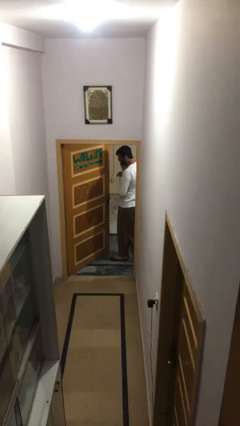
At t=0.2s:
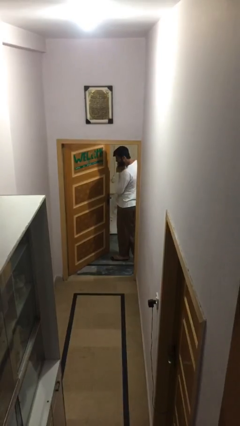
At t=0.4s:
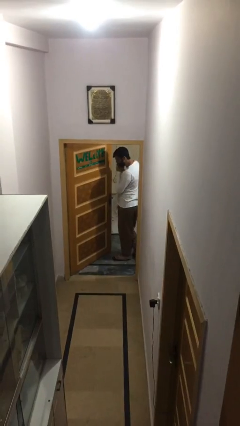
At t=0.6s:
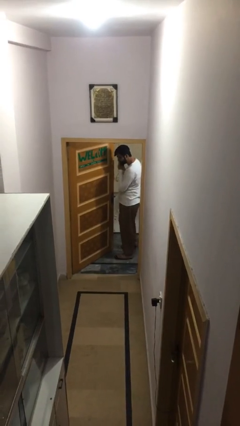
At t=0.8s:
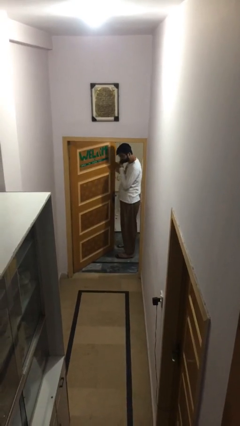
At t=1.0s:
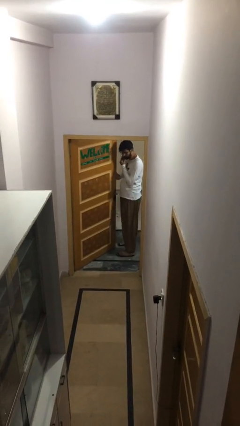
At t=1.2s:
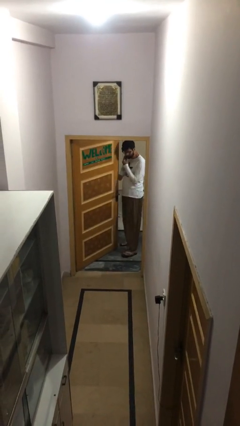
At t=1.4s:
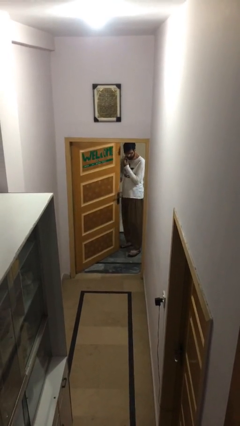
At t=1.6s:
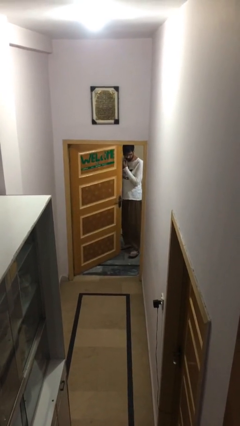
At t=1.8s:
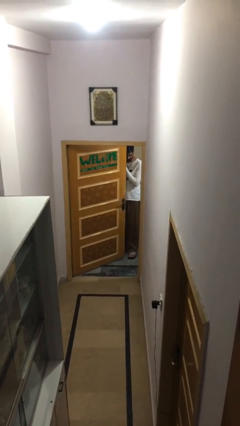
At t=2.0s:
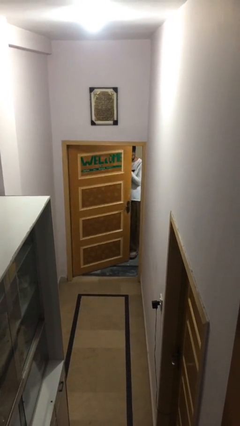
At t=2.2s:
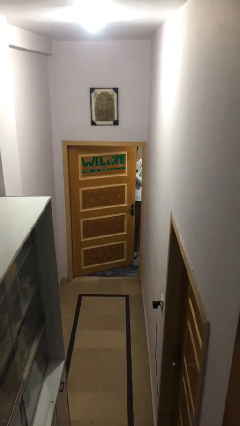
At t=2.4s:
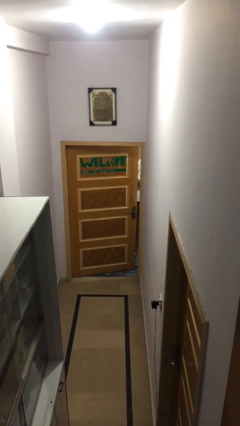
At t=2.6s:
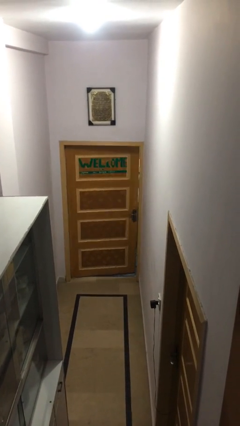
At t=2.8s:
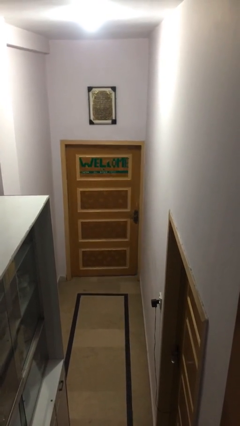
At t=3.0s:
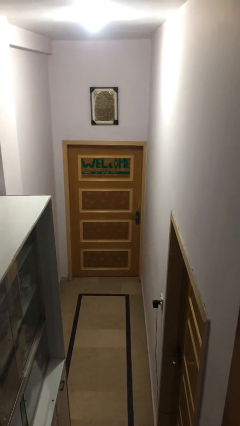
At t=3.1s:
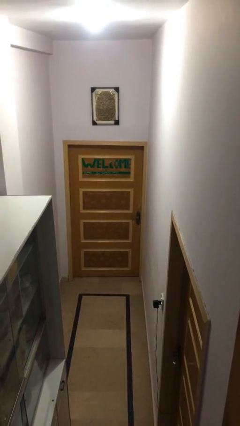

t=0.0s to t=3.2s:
person closes facility door

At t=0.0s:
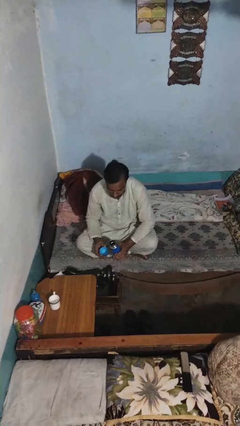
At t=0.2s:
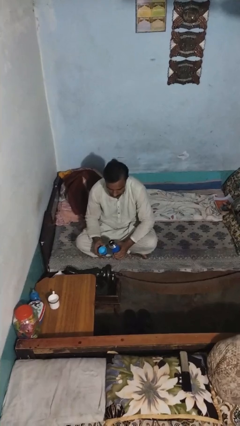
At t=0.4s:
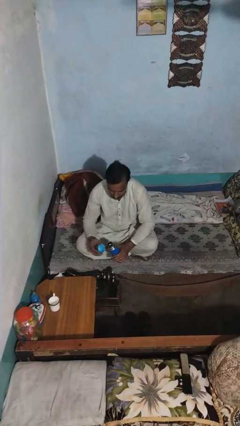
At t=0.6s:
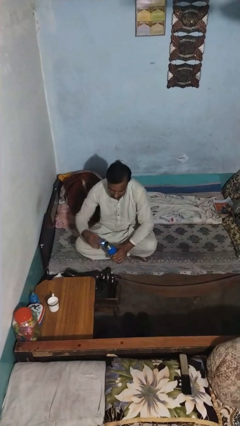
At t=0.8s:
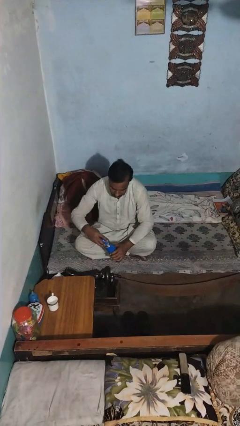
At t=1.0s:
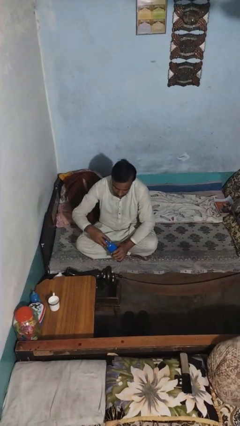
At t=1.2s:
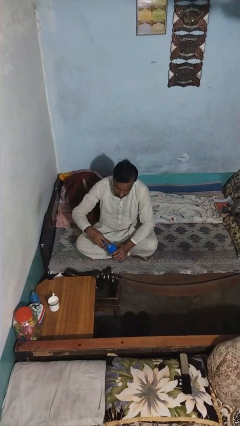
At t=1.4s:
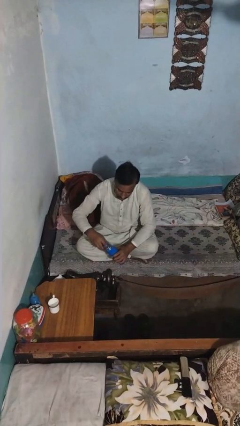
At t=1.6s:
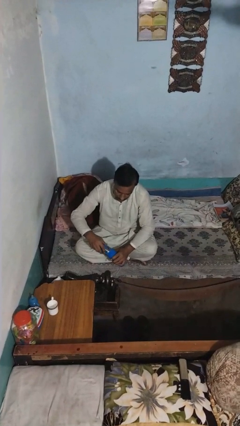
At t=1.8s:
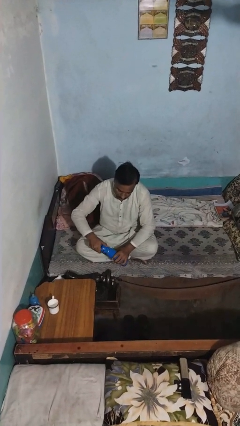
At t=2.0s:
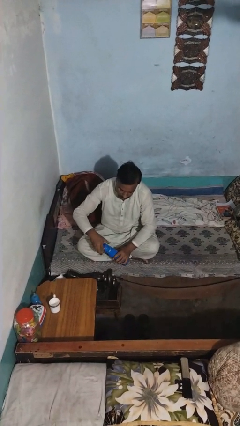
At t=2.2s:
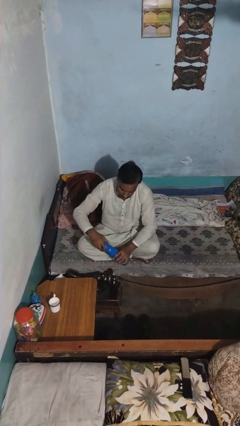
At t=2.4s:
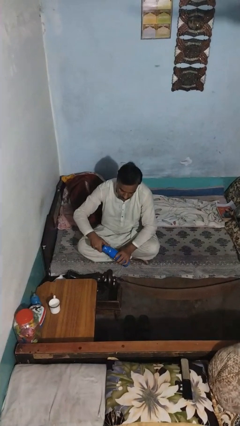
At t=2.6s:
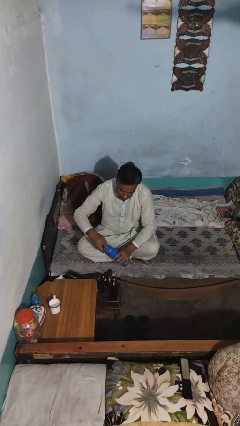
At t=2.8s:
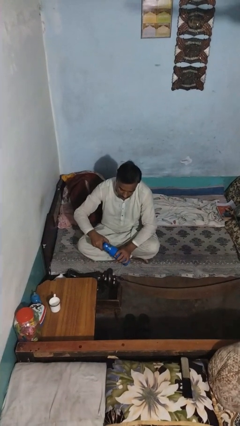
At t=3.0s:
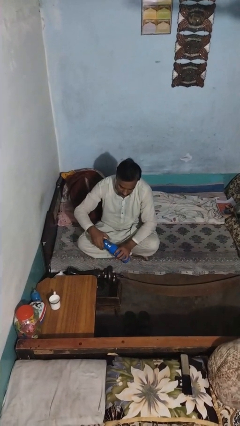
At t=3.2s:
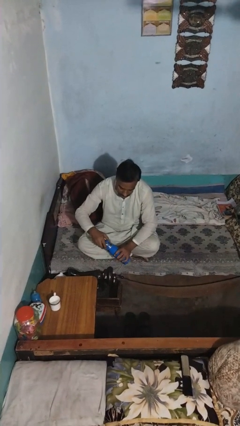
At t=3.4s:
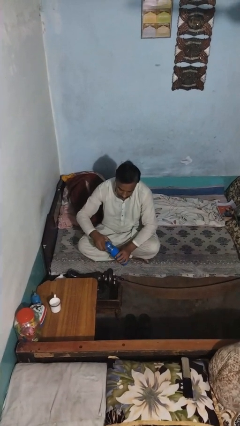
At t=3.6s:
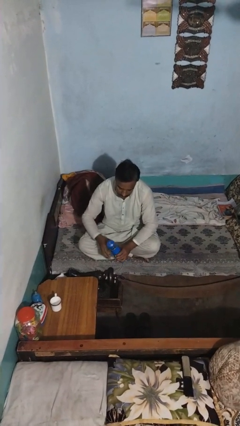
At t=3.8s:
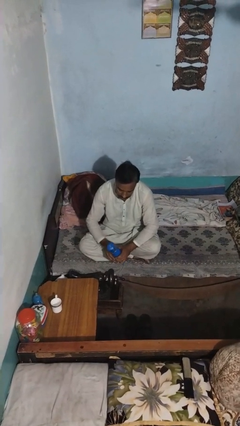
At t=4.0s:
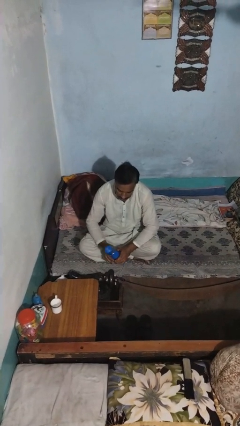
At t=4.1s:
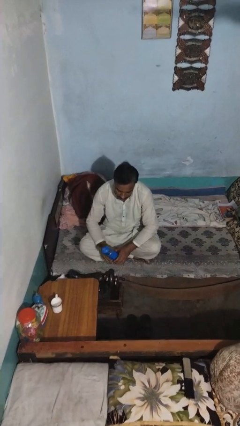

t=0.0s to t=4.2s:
person screws lid to bottle

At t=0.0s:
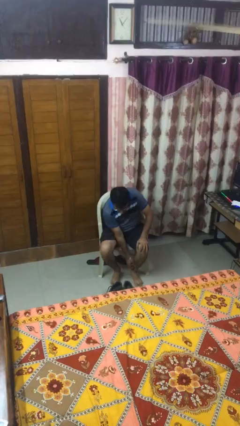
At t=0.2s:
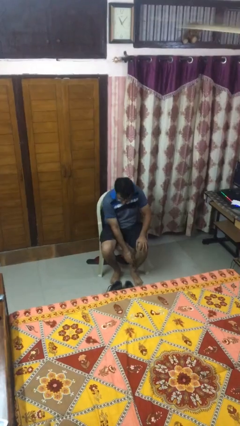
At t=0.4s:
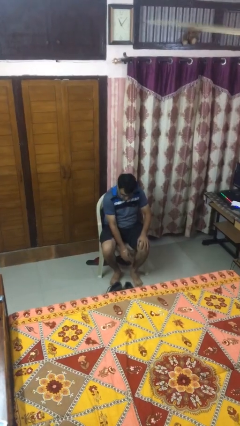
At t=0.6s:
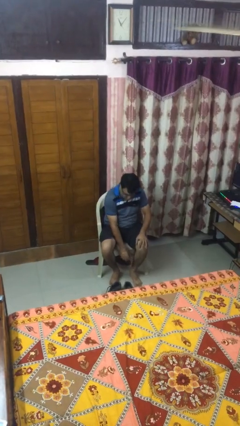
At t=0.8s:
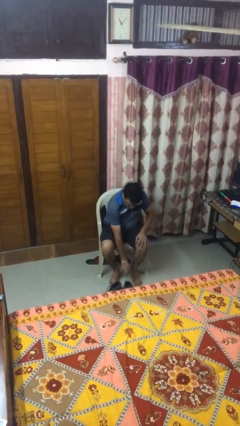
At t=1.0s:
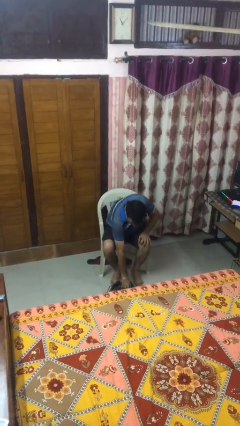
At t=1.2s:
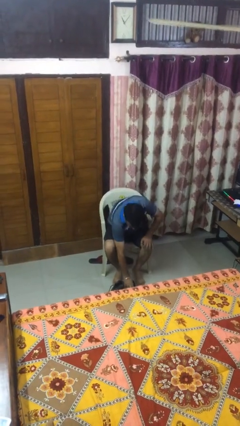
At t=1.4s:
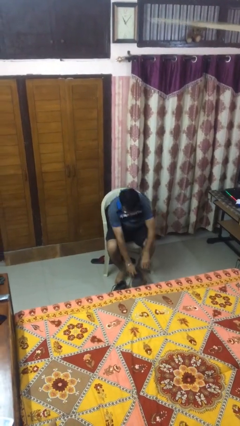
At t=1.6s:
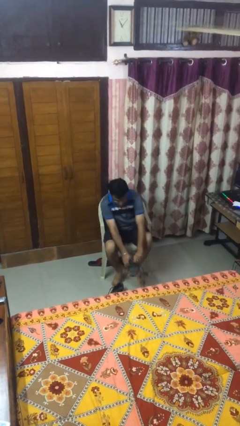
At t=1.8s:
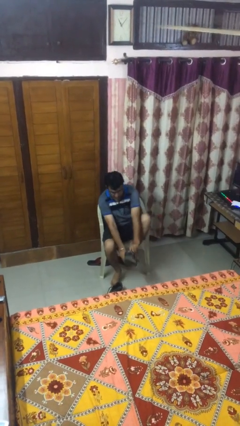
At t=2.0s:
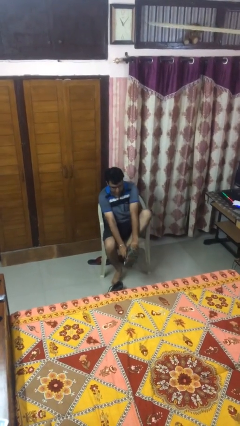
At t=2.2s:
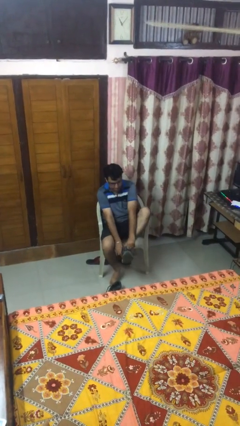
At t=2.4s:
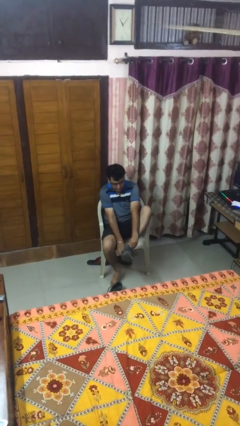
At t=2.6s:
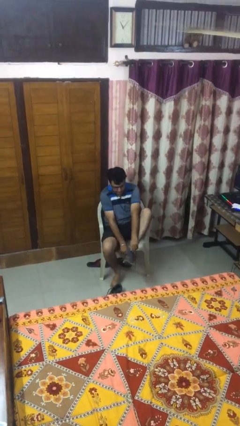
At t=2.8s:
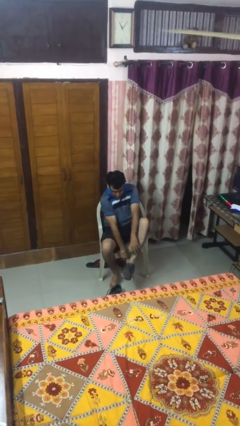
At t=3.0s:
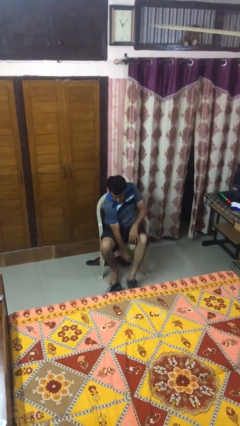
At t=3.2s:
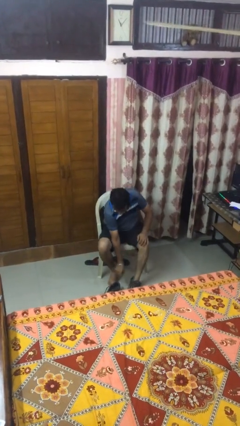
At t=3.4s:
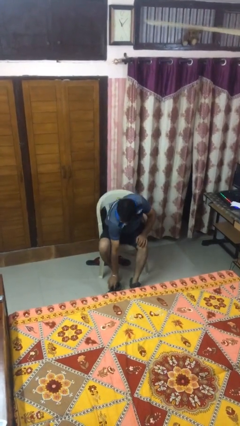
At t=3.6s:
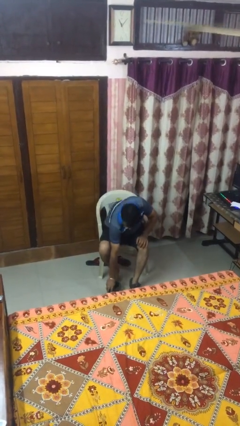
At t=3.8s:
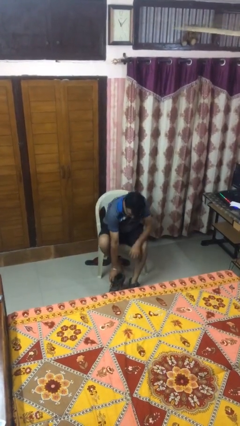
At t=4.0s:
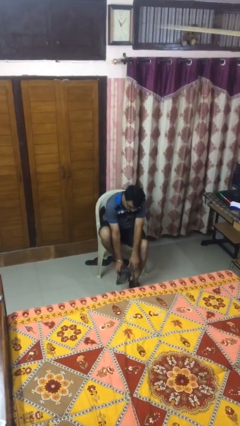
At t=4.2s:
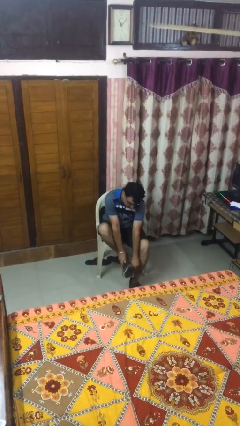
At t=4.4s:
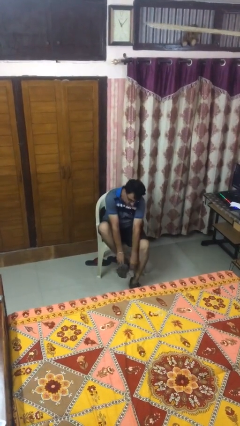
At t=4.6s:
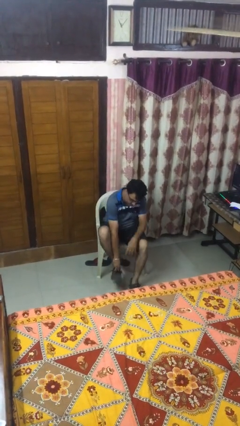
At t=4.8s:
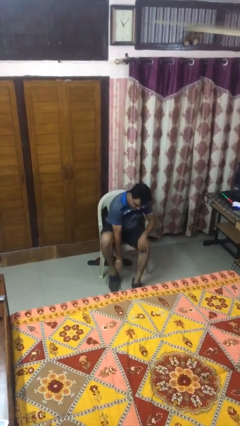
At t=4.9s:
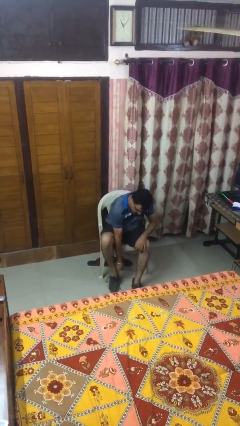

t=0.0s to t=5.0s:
person puts on shoes

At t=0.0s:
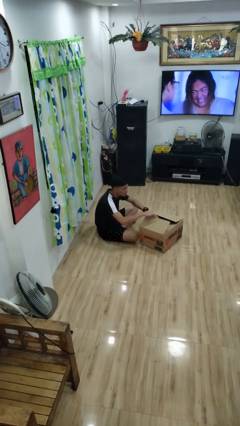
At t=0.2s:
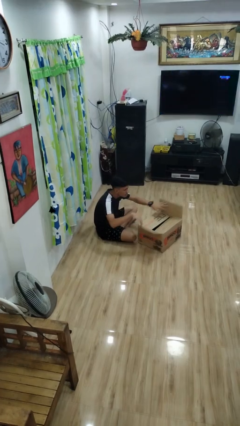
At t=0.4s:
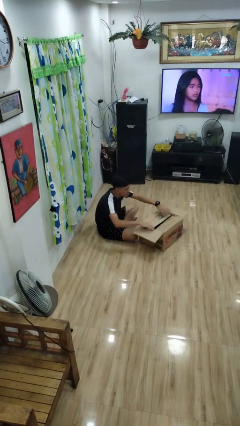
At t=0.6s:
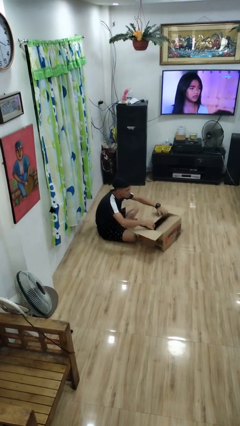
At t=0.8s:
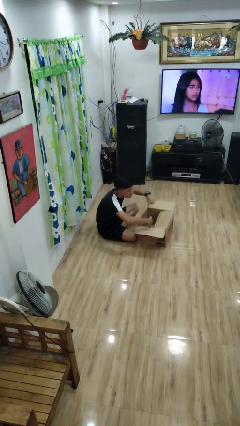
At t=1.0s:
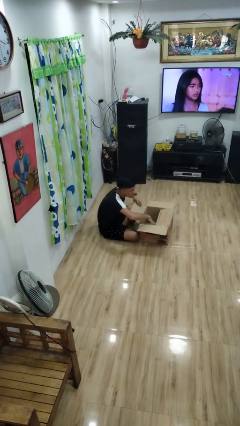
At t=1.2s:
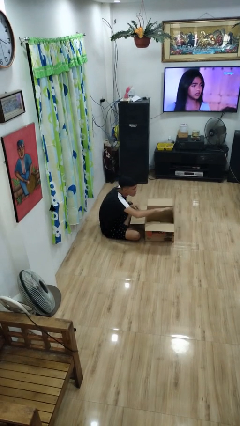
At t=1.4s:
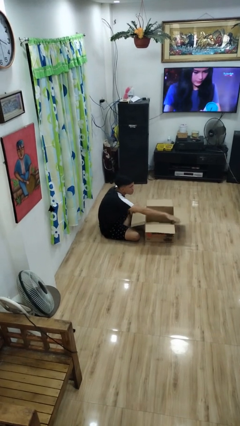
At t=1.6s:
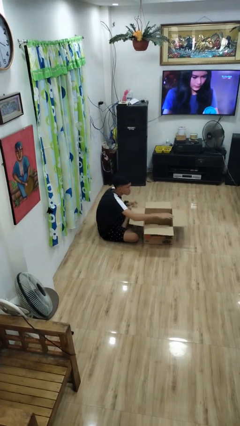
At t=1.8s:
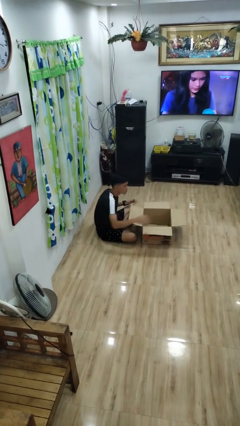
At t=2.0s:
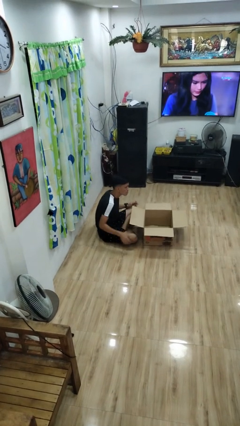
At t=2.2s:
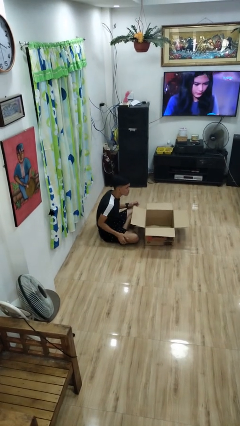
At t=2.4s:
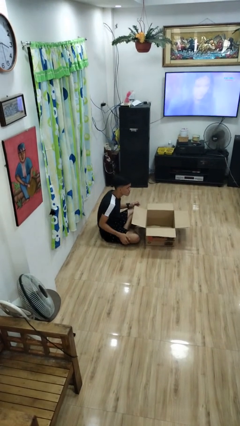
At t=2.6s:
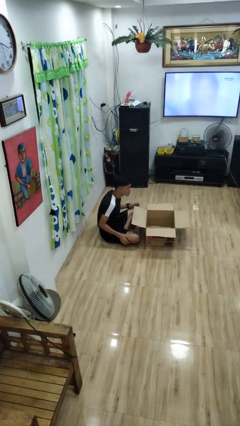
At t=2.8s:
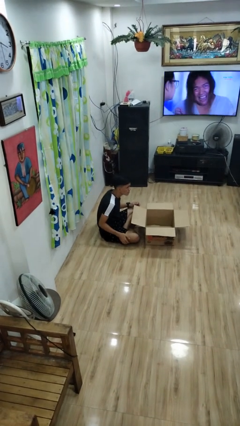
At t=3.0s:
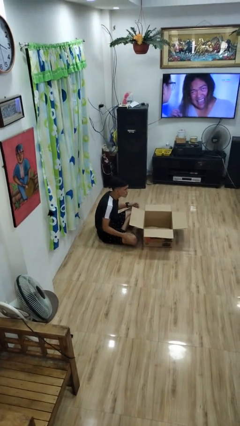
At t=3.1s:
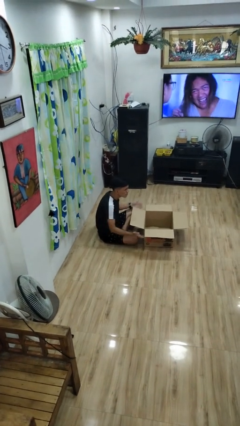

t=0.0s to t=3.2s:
person opens box

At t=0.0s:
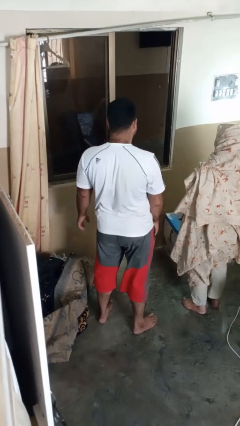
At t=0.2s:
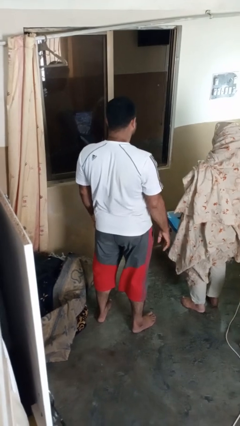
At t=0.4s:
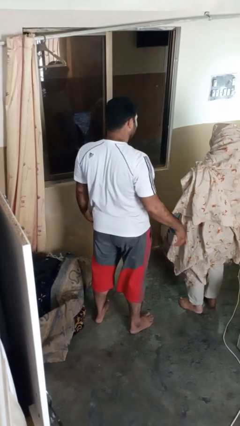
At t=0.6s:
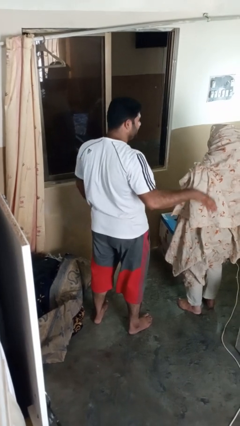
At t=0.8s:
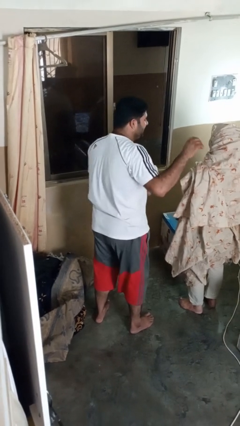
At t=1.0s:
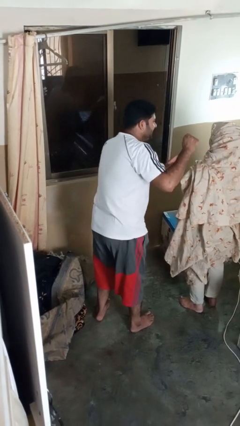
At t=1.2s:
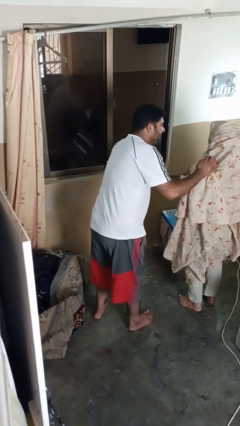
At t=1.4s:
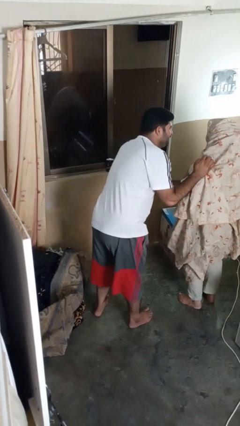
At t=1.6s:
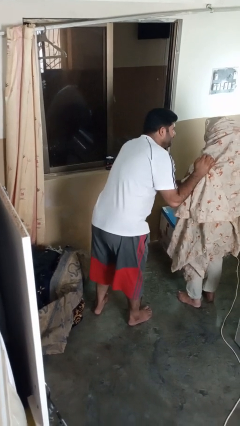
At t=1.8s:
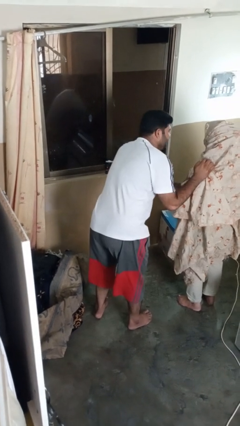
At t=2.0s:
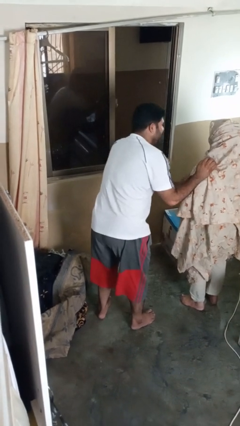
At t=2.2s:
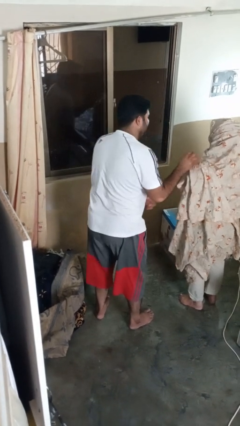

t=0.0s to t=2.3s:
person laughs with person
